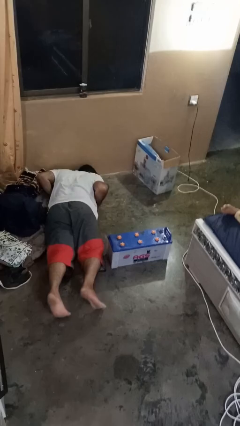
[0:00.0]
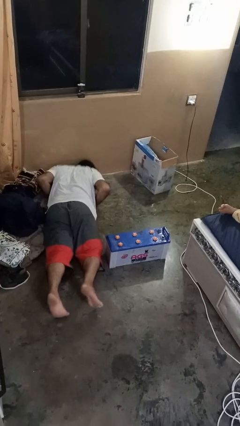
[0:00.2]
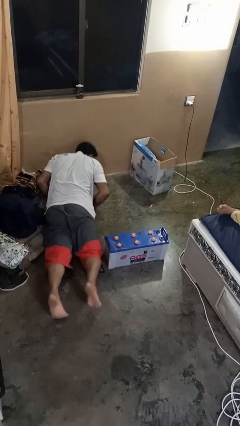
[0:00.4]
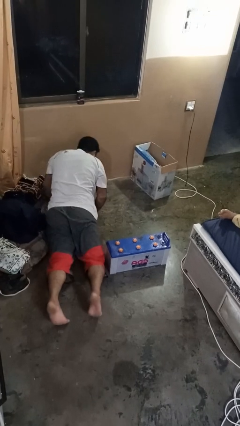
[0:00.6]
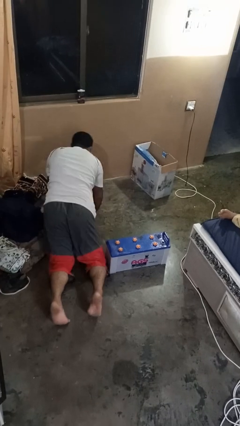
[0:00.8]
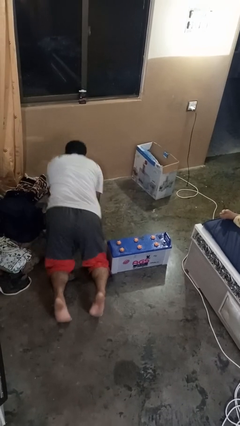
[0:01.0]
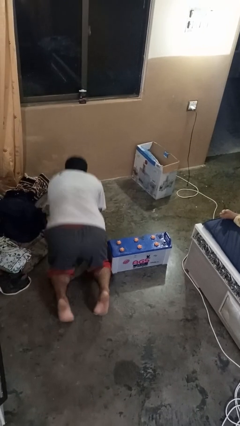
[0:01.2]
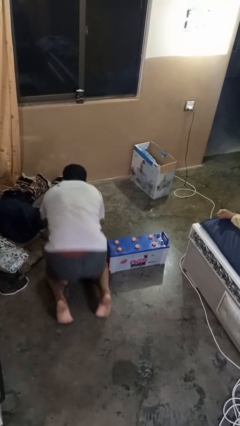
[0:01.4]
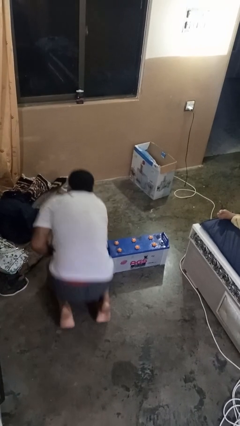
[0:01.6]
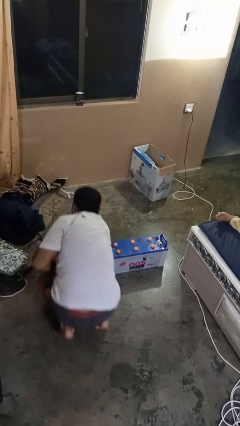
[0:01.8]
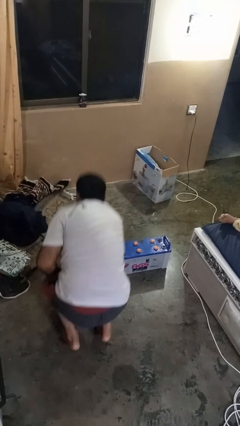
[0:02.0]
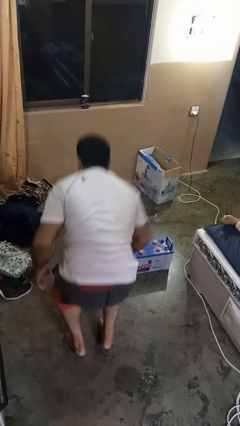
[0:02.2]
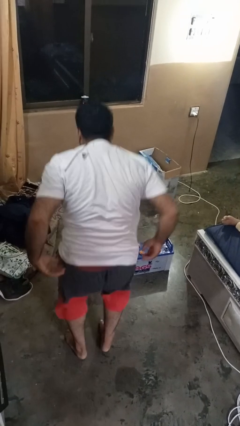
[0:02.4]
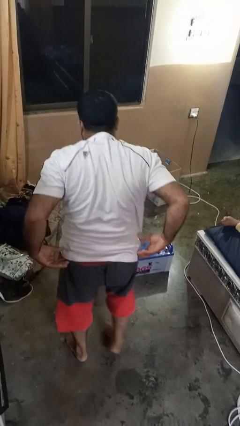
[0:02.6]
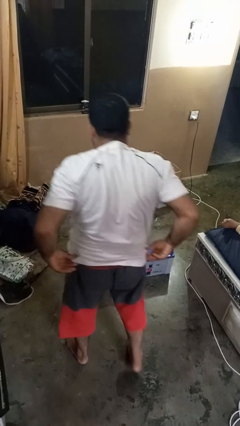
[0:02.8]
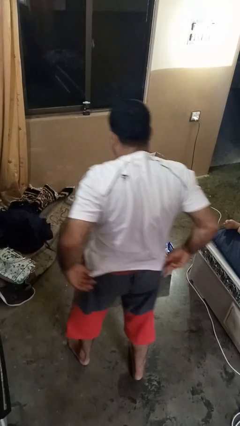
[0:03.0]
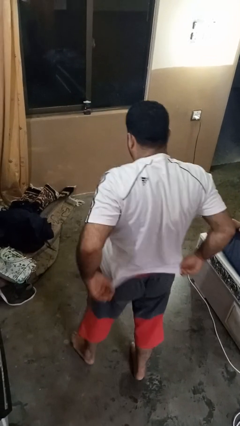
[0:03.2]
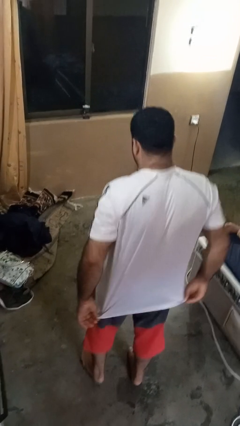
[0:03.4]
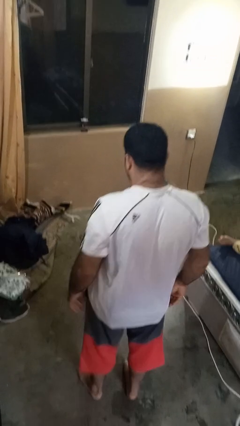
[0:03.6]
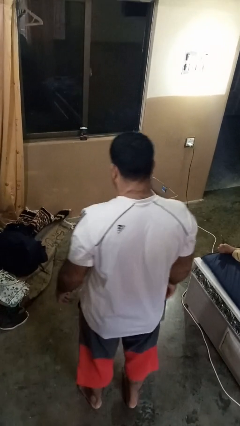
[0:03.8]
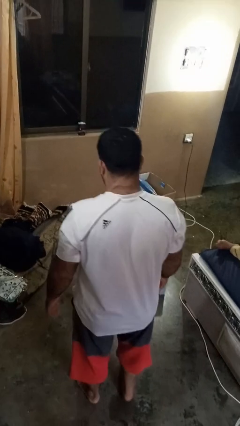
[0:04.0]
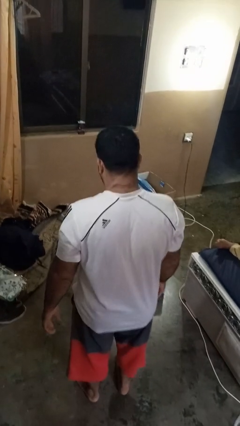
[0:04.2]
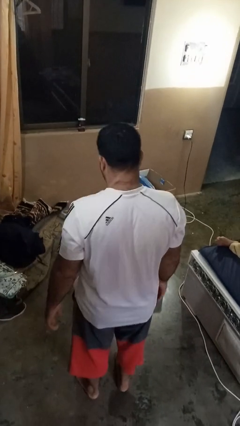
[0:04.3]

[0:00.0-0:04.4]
person stands up from floor

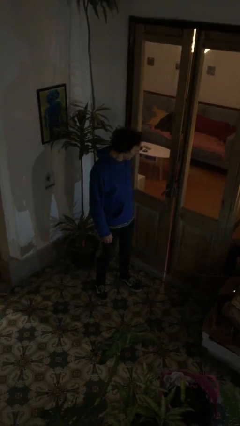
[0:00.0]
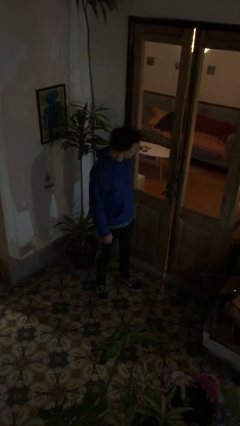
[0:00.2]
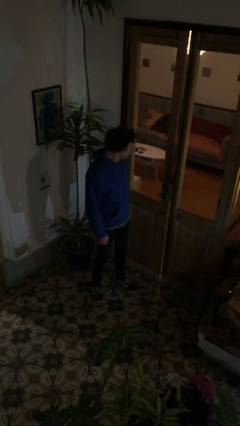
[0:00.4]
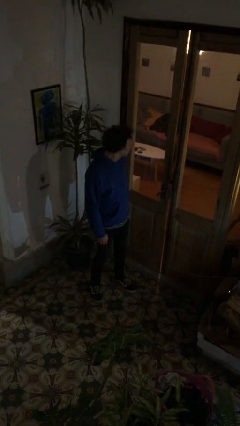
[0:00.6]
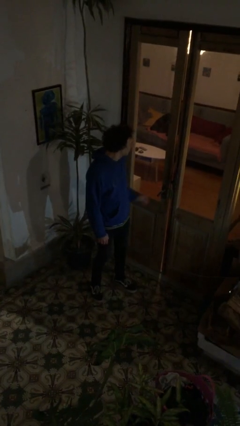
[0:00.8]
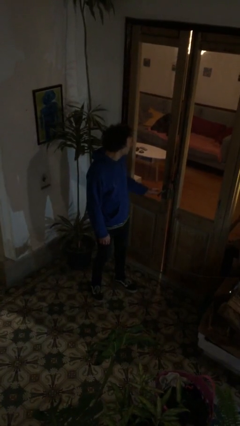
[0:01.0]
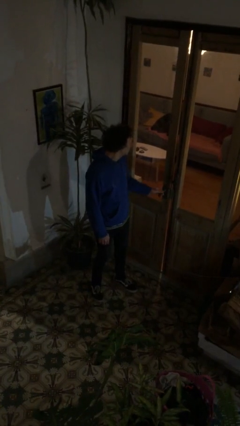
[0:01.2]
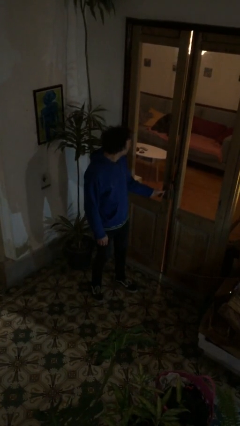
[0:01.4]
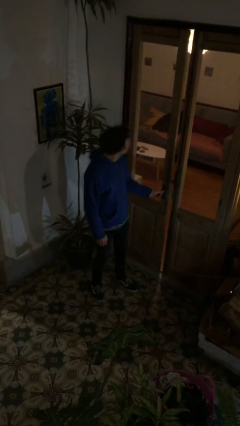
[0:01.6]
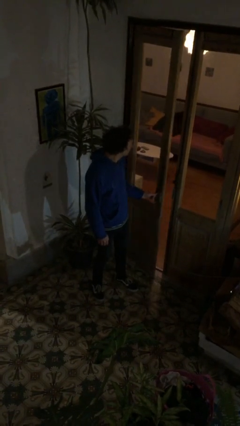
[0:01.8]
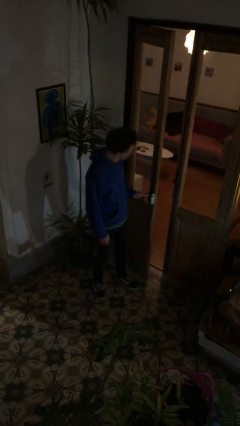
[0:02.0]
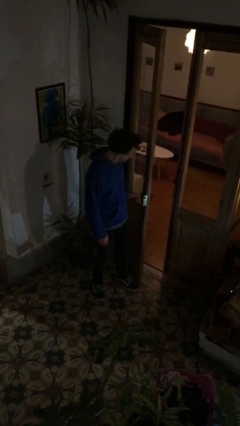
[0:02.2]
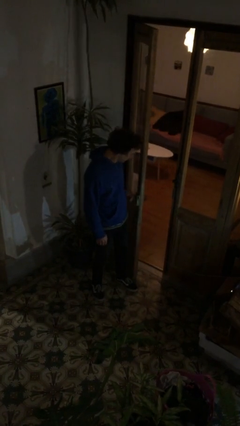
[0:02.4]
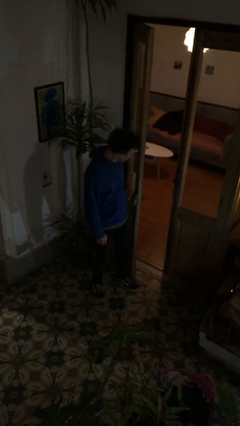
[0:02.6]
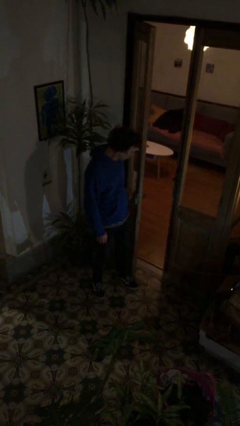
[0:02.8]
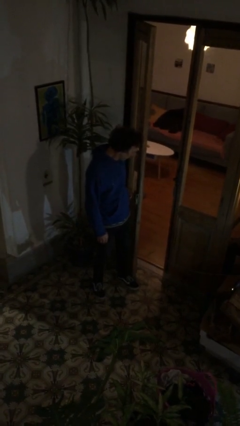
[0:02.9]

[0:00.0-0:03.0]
person opens facility door

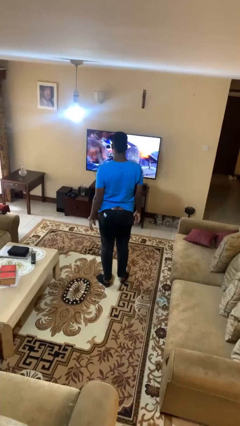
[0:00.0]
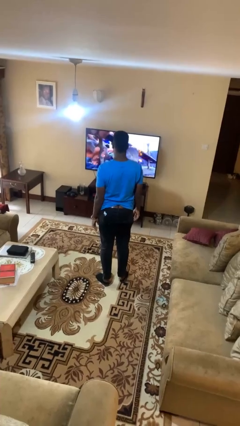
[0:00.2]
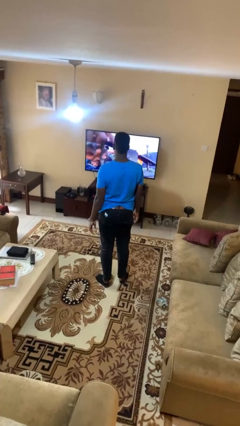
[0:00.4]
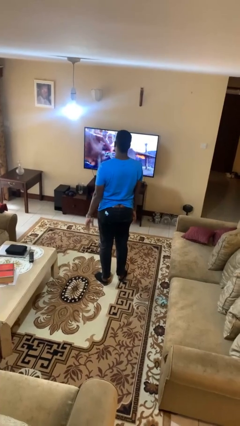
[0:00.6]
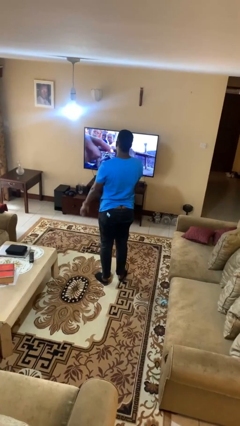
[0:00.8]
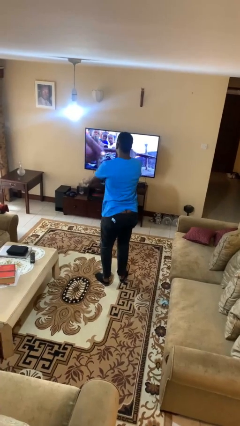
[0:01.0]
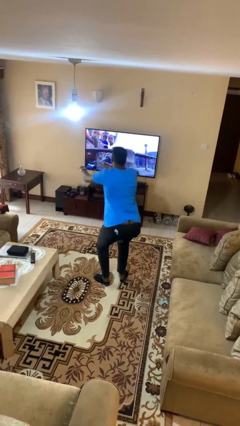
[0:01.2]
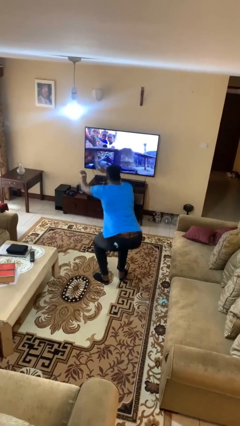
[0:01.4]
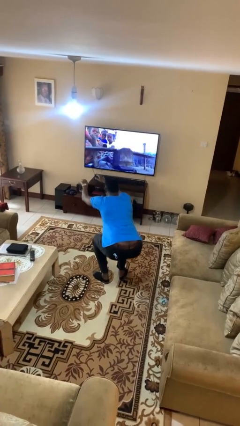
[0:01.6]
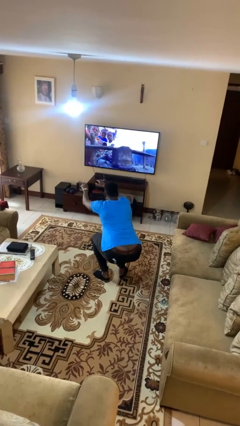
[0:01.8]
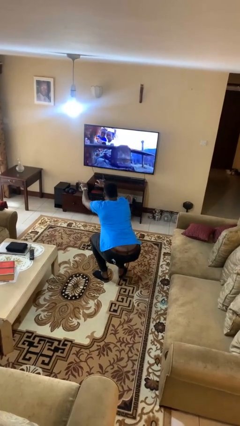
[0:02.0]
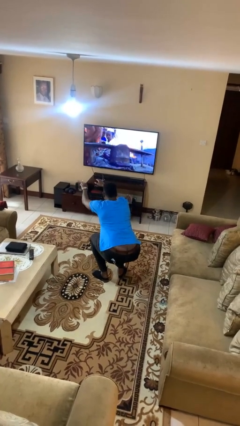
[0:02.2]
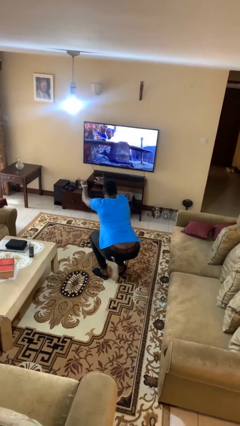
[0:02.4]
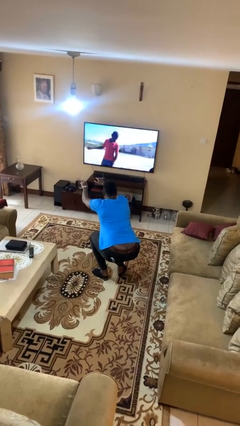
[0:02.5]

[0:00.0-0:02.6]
person squats

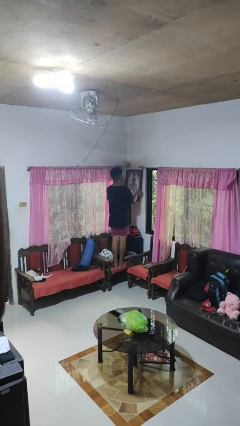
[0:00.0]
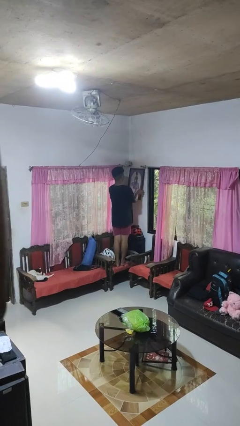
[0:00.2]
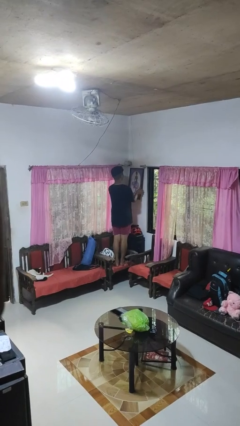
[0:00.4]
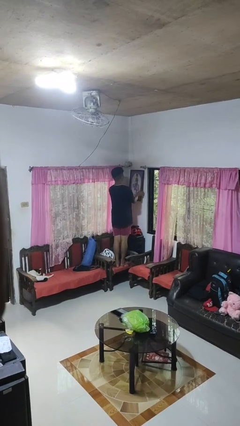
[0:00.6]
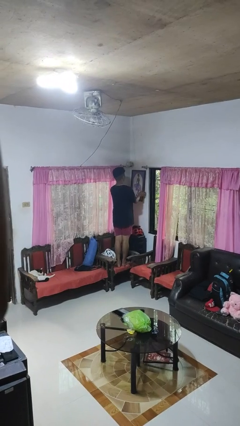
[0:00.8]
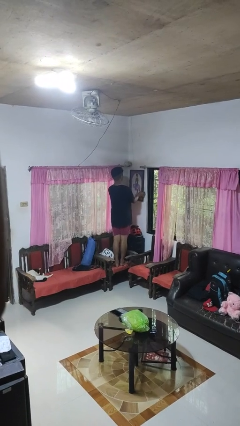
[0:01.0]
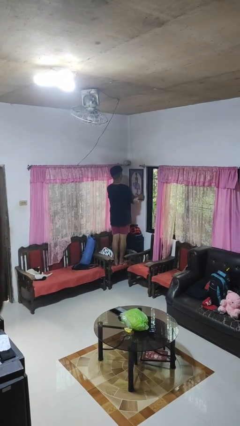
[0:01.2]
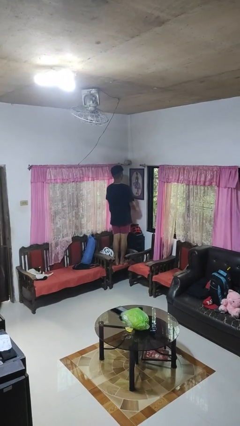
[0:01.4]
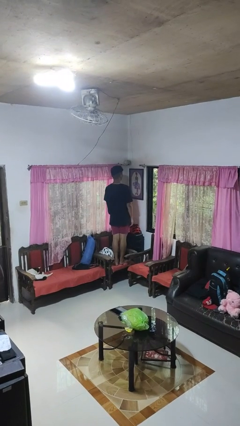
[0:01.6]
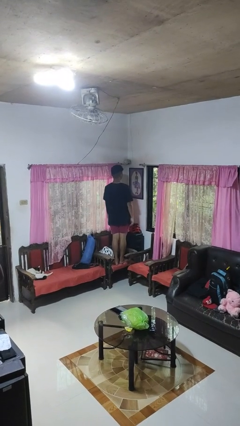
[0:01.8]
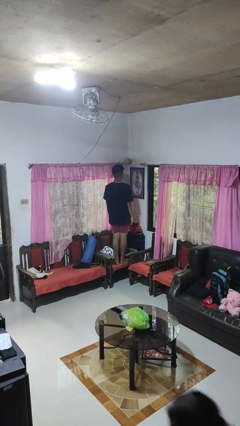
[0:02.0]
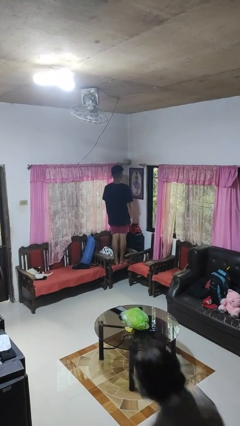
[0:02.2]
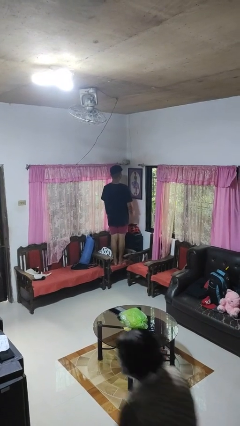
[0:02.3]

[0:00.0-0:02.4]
person puts up picture frame

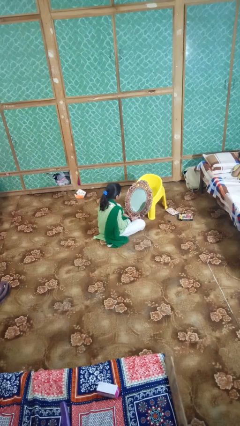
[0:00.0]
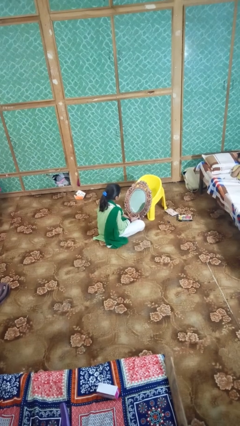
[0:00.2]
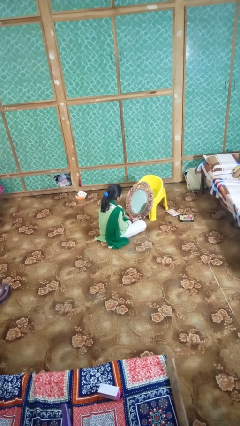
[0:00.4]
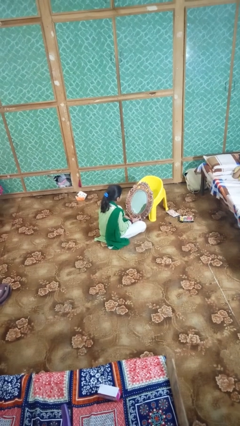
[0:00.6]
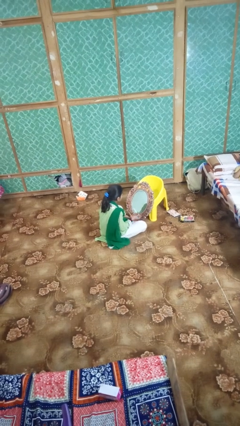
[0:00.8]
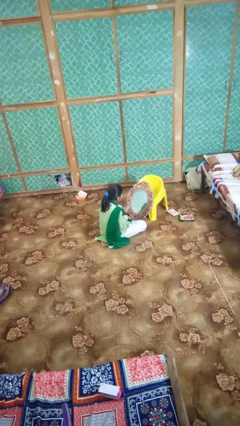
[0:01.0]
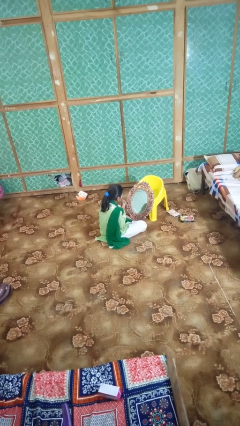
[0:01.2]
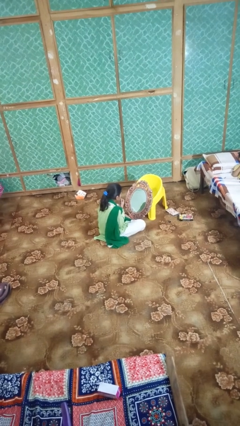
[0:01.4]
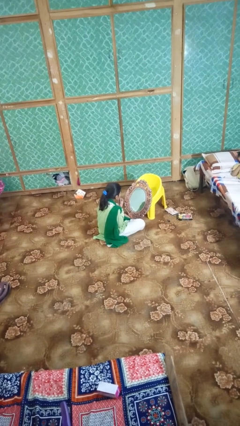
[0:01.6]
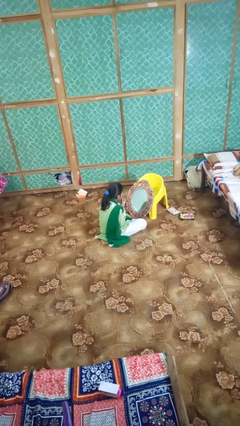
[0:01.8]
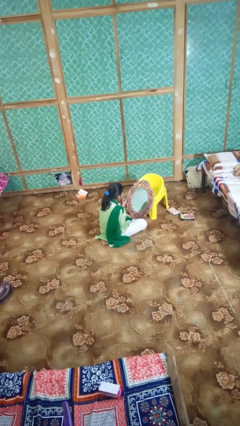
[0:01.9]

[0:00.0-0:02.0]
person applies lip makeup

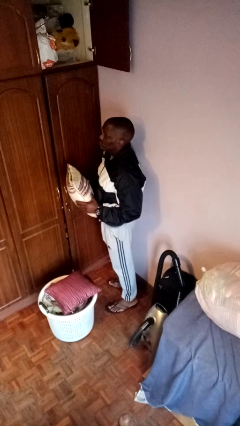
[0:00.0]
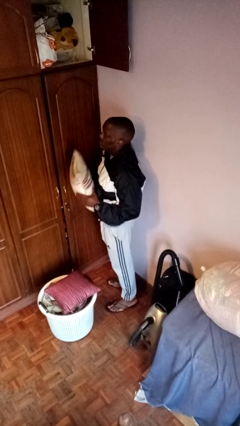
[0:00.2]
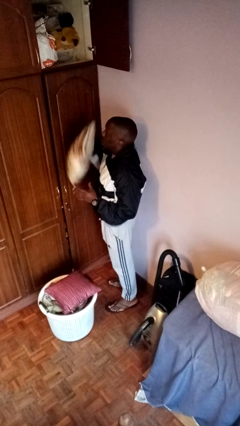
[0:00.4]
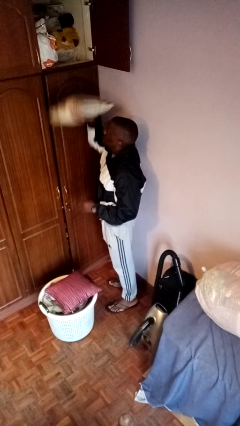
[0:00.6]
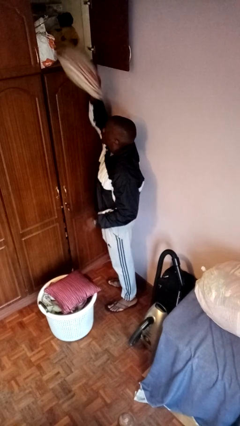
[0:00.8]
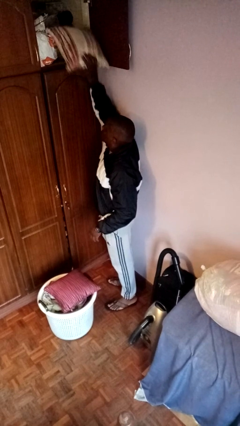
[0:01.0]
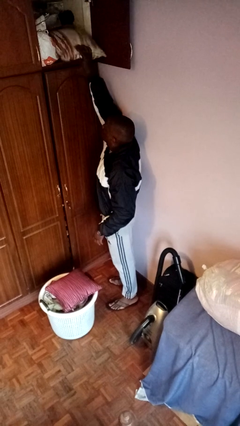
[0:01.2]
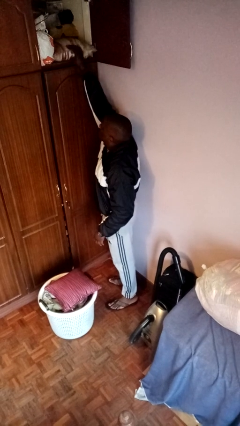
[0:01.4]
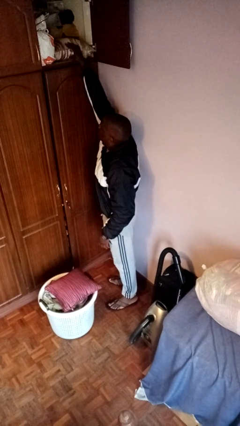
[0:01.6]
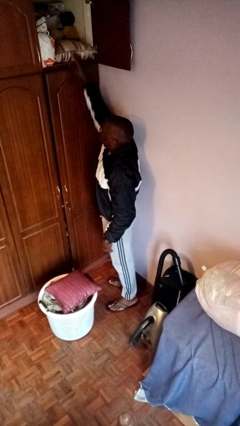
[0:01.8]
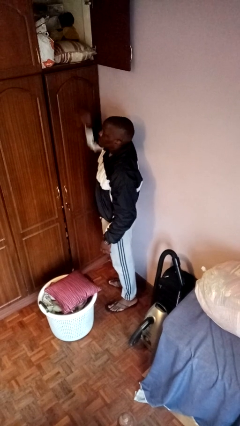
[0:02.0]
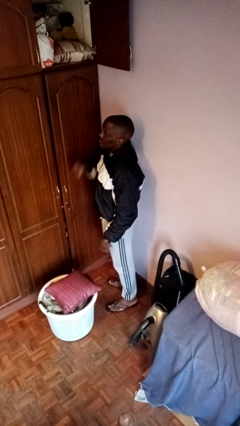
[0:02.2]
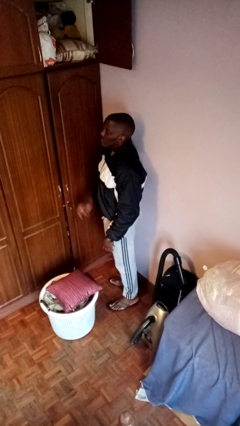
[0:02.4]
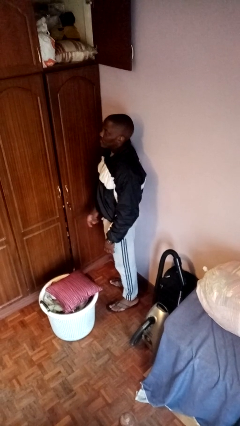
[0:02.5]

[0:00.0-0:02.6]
person puts down object on shelf
